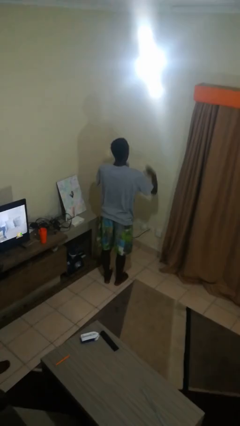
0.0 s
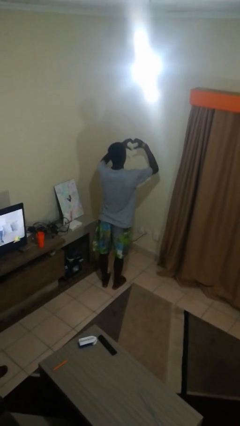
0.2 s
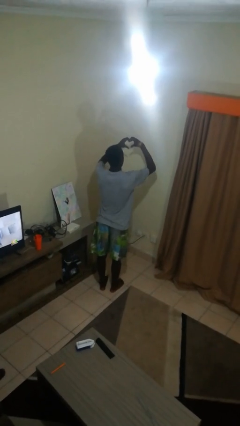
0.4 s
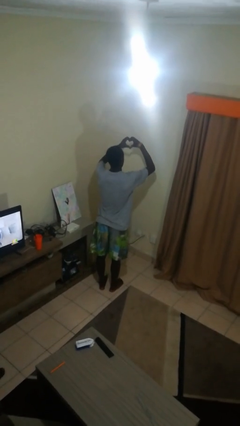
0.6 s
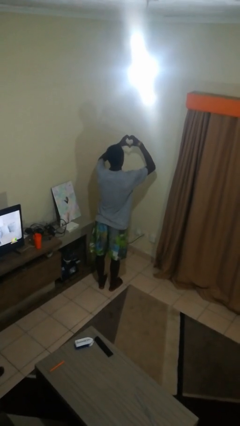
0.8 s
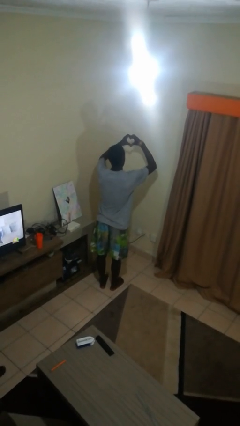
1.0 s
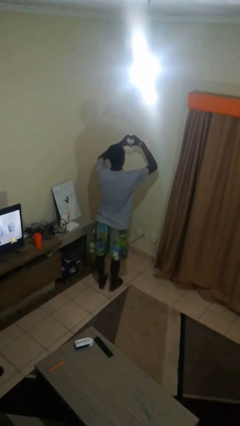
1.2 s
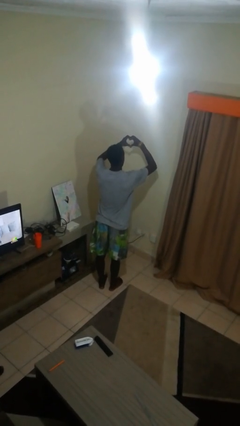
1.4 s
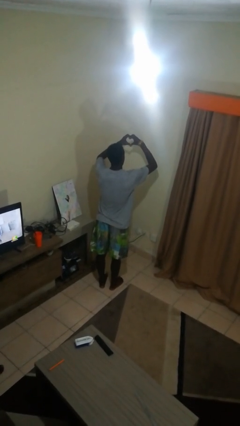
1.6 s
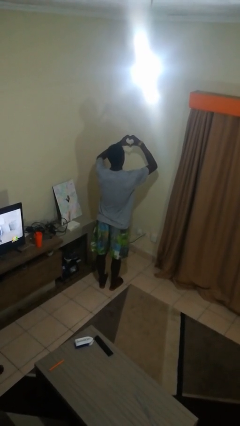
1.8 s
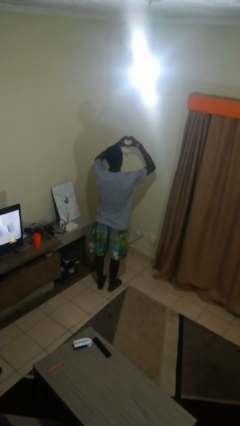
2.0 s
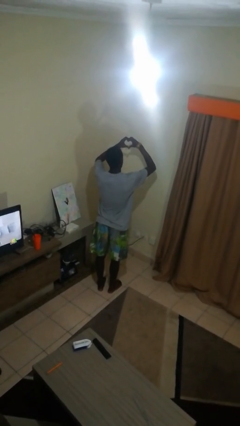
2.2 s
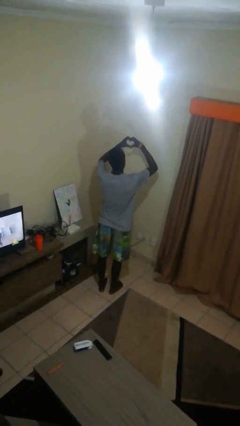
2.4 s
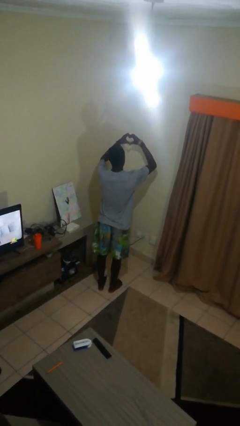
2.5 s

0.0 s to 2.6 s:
person gestures heart

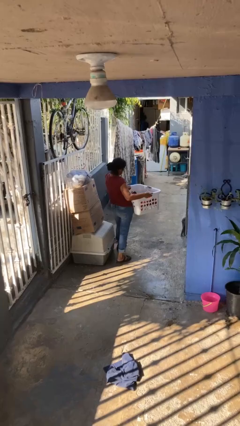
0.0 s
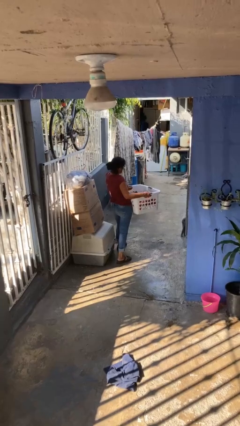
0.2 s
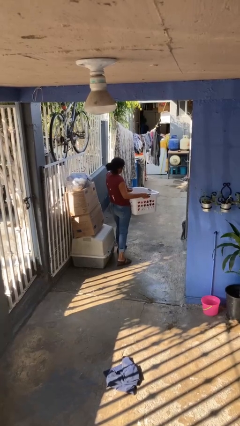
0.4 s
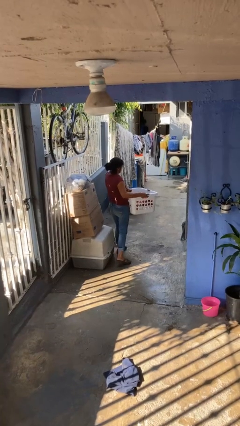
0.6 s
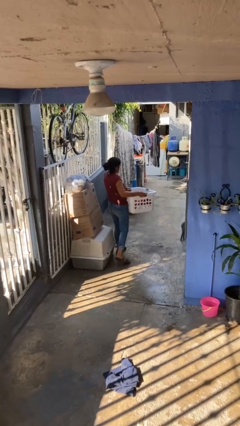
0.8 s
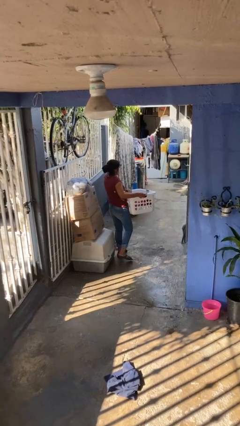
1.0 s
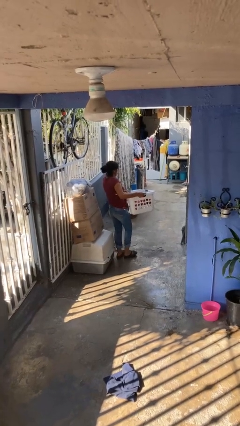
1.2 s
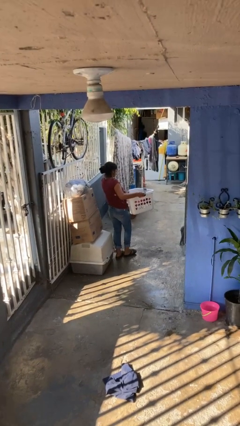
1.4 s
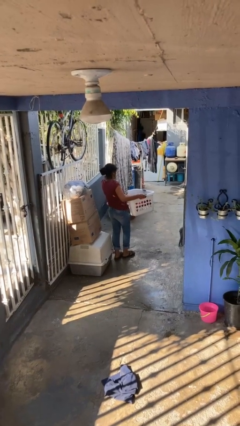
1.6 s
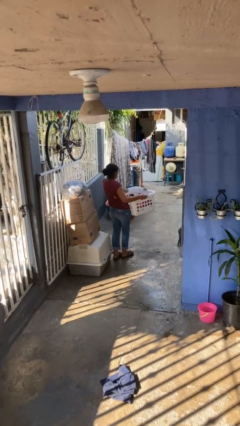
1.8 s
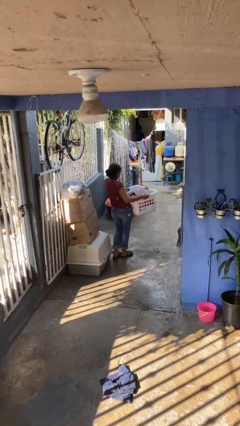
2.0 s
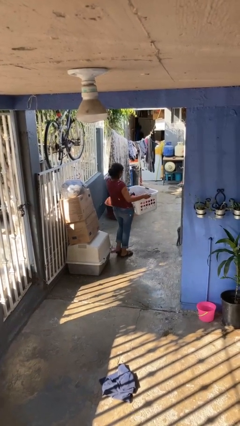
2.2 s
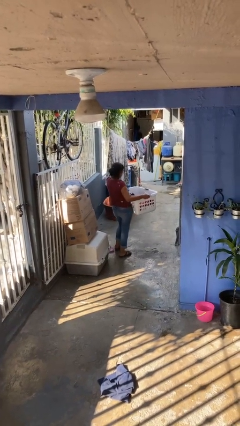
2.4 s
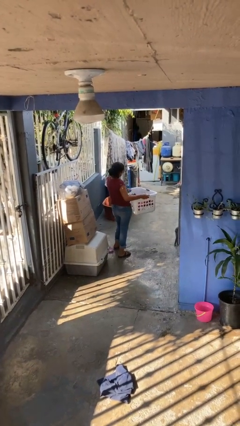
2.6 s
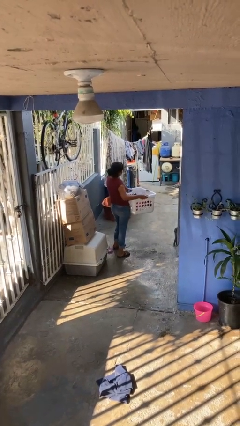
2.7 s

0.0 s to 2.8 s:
person carries laundry basket

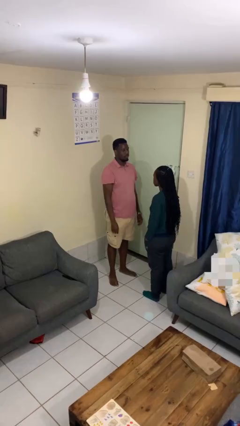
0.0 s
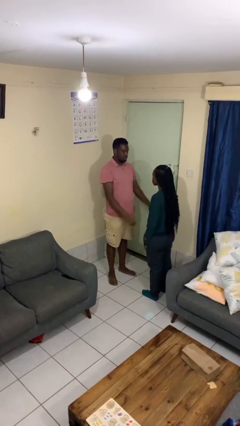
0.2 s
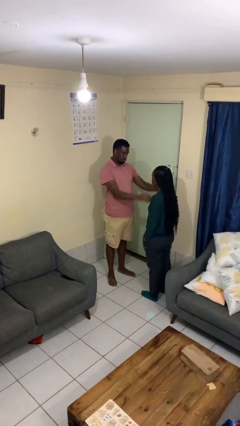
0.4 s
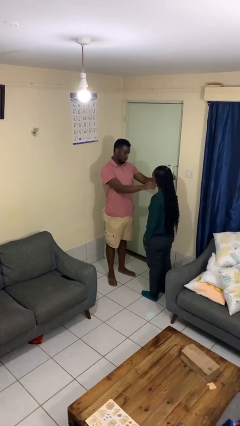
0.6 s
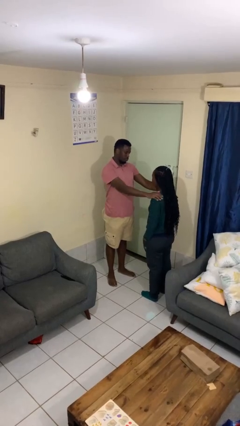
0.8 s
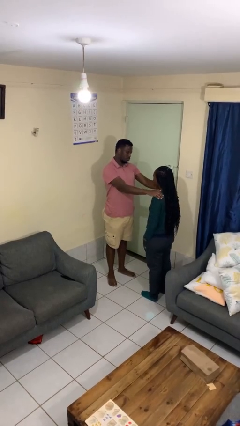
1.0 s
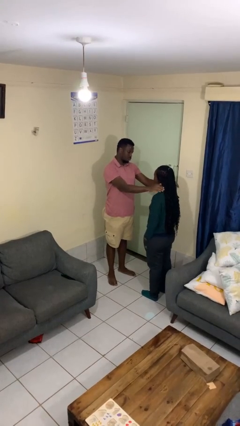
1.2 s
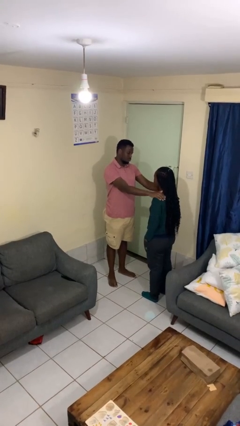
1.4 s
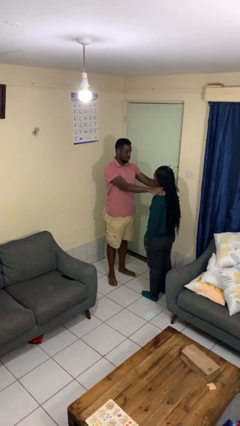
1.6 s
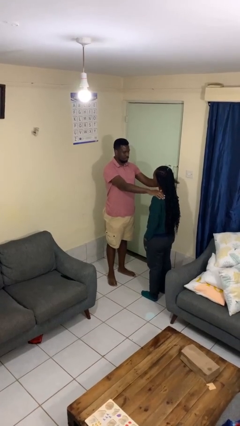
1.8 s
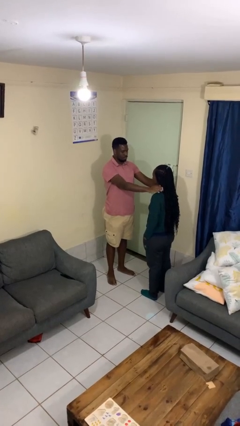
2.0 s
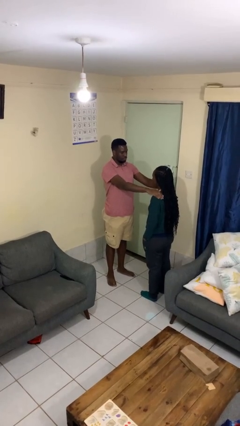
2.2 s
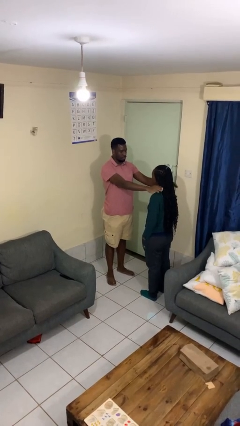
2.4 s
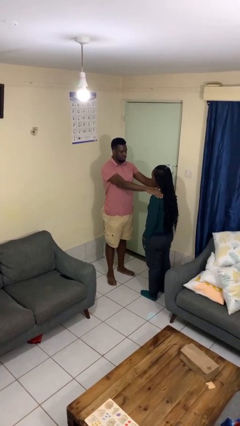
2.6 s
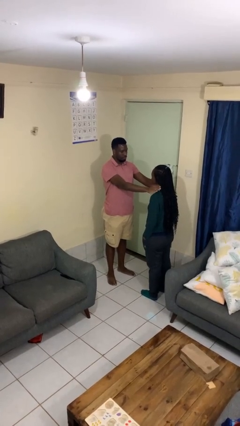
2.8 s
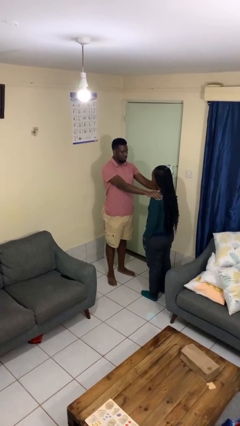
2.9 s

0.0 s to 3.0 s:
person pounds shoulders of person

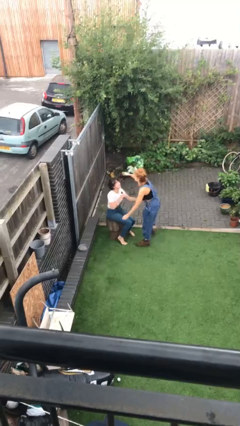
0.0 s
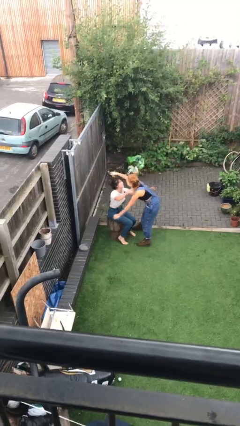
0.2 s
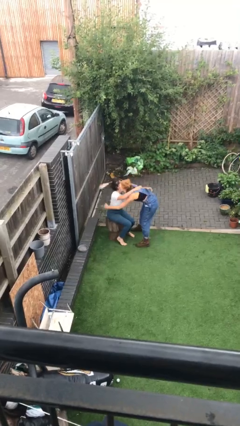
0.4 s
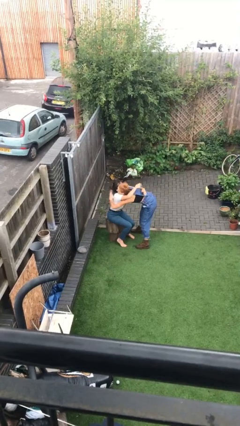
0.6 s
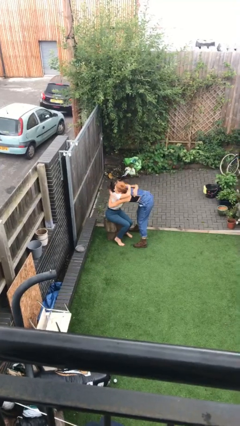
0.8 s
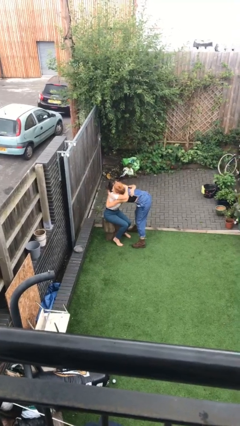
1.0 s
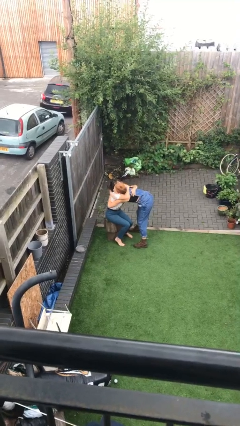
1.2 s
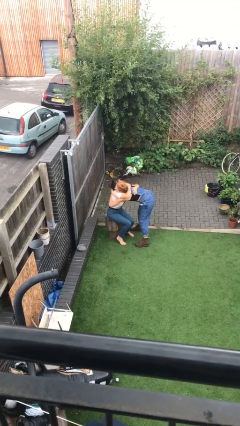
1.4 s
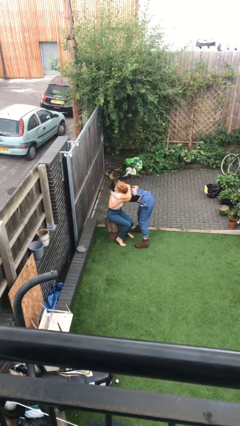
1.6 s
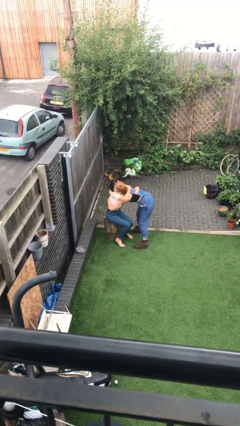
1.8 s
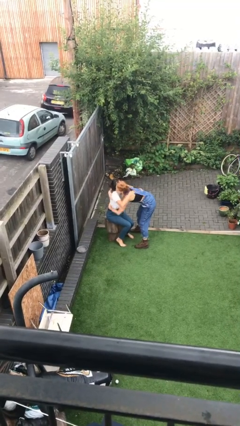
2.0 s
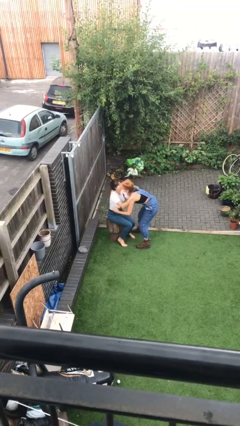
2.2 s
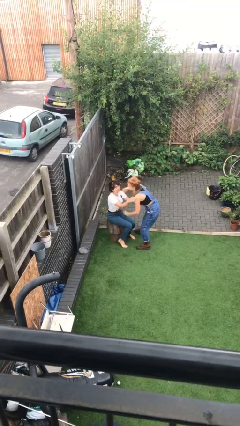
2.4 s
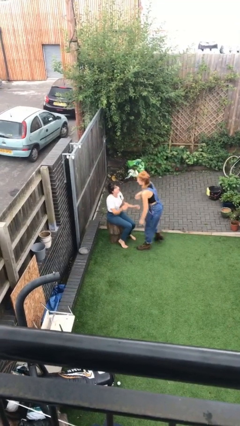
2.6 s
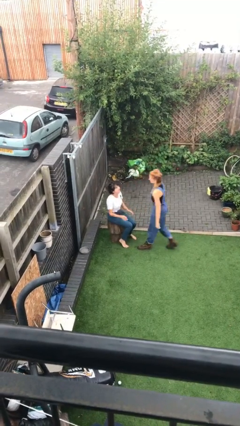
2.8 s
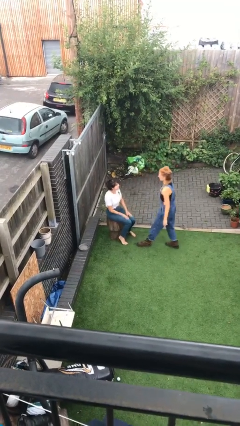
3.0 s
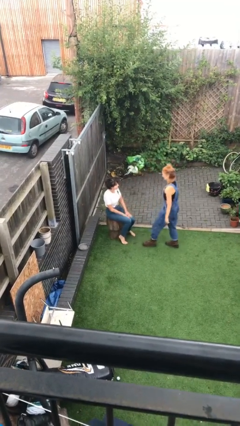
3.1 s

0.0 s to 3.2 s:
person embraces person

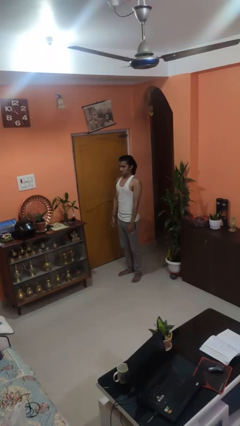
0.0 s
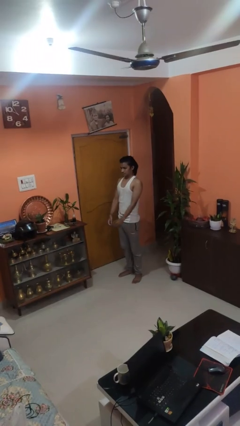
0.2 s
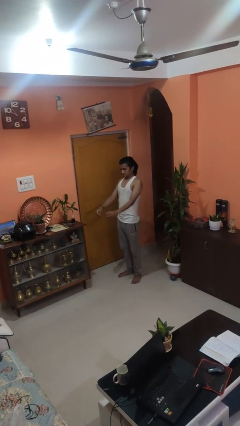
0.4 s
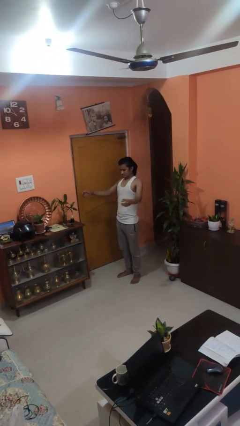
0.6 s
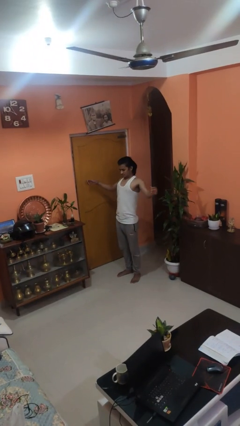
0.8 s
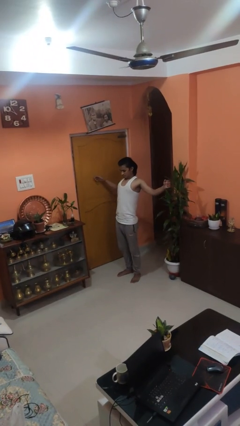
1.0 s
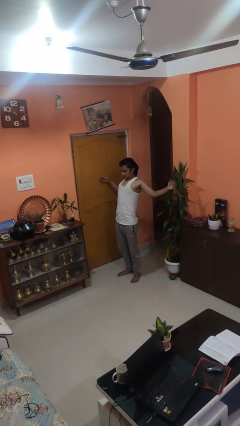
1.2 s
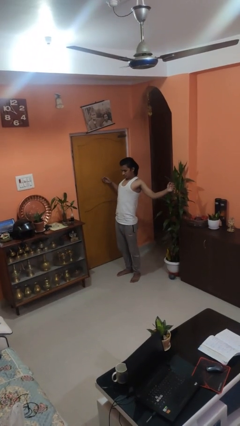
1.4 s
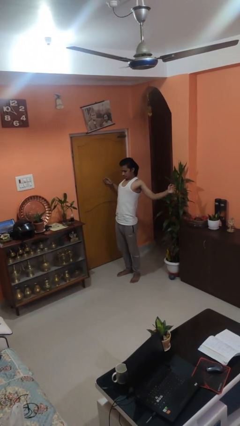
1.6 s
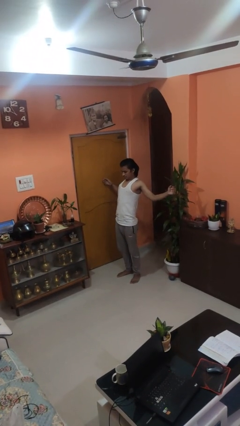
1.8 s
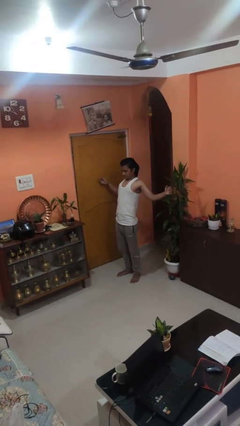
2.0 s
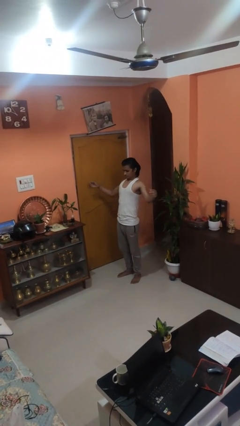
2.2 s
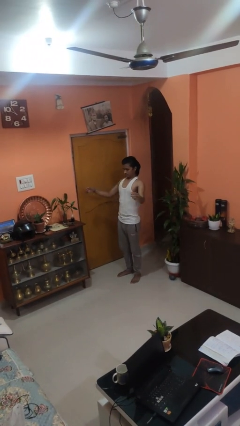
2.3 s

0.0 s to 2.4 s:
person stretches arms to side

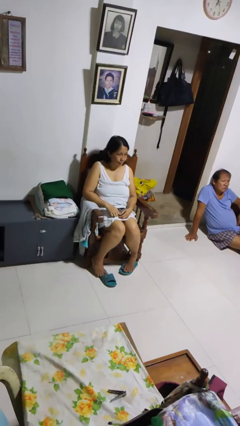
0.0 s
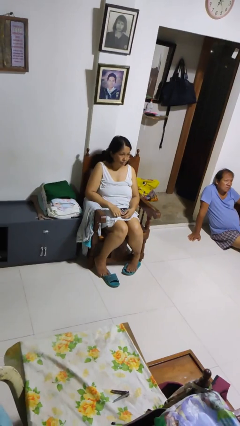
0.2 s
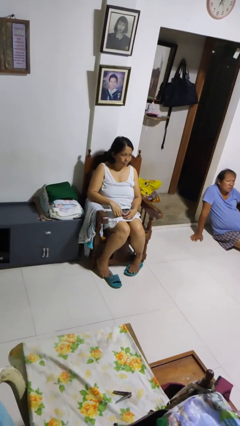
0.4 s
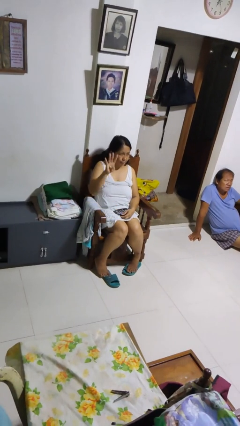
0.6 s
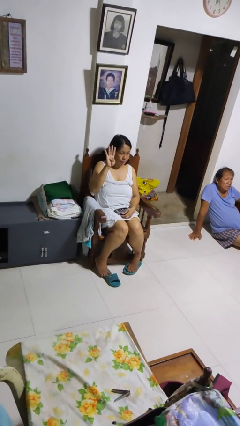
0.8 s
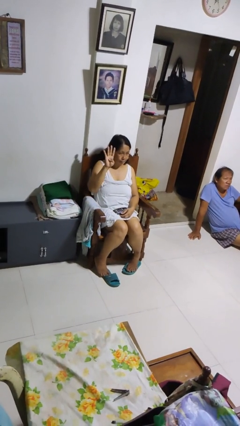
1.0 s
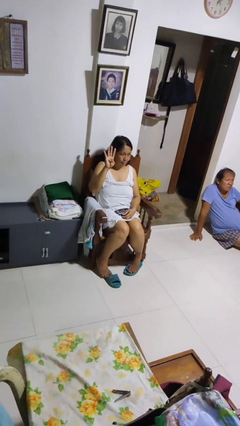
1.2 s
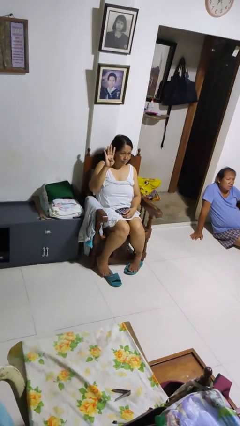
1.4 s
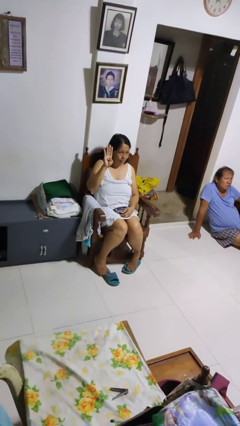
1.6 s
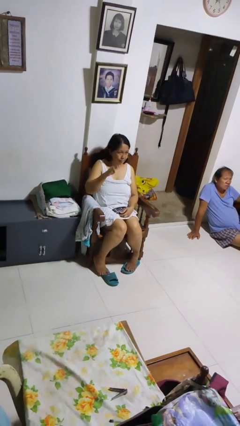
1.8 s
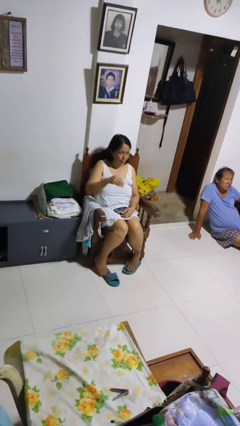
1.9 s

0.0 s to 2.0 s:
person gestures number four

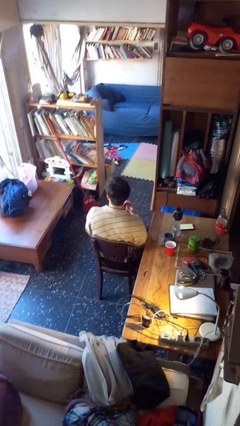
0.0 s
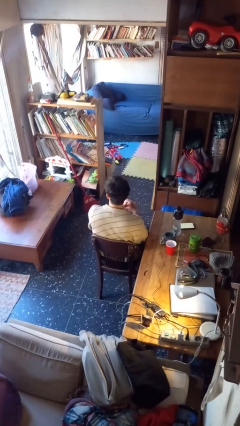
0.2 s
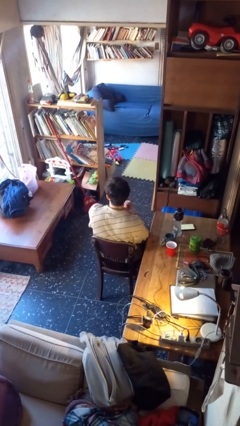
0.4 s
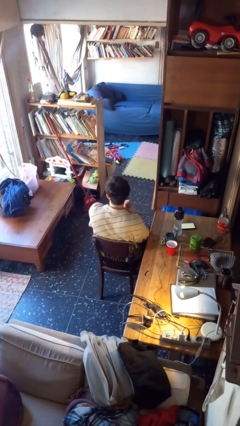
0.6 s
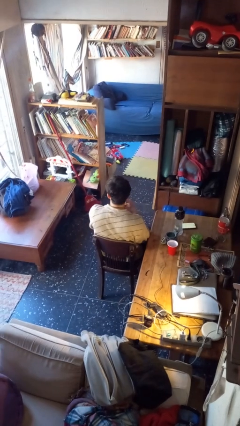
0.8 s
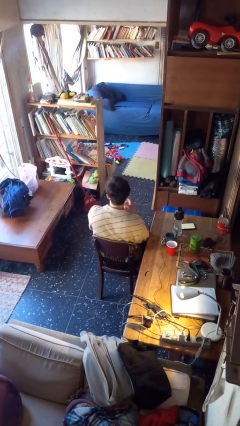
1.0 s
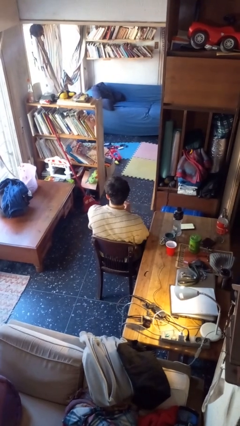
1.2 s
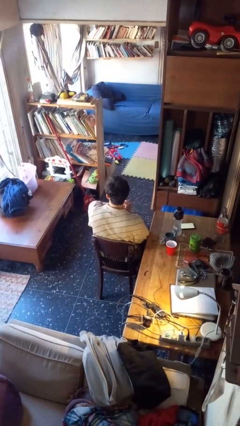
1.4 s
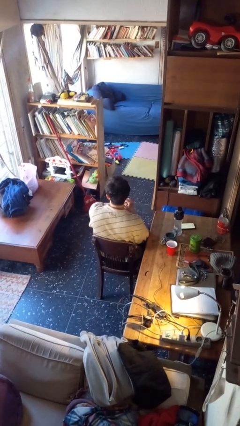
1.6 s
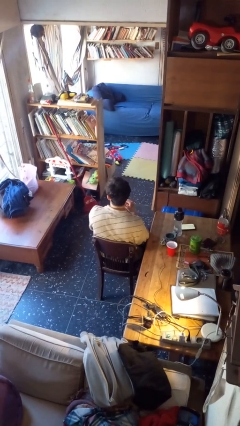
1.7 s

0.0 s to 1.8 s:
person snaps fingers
